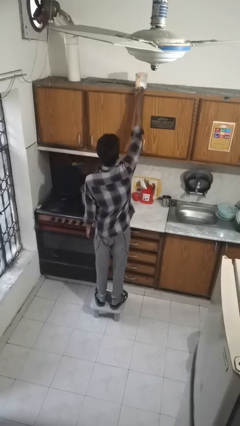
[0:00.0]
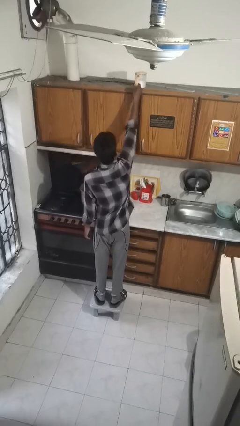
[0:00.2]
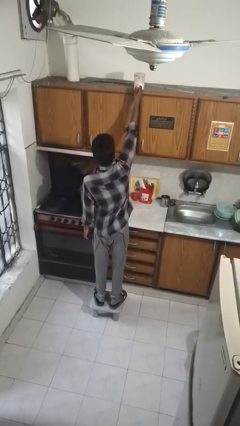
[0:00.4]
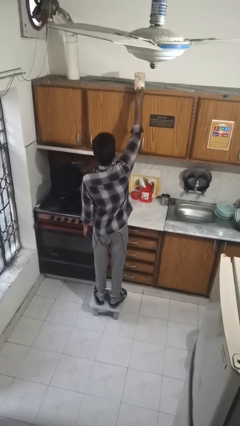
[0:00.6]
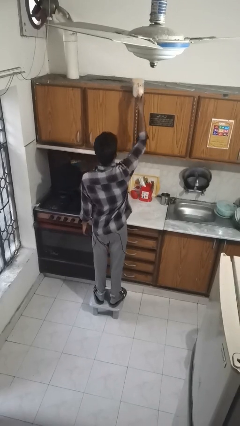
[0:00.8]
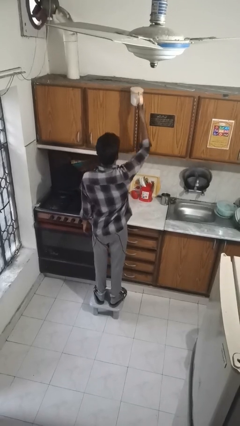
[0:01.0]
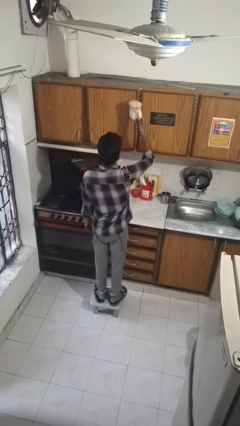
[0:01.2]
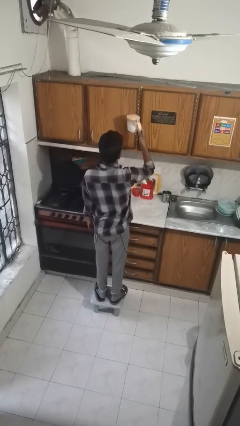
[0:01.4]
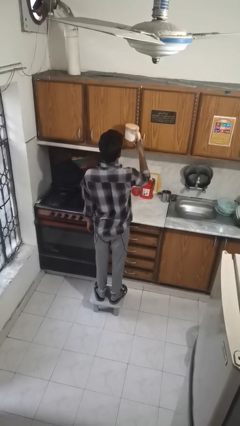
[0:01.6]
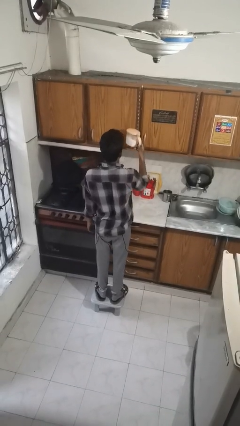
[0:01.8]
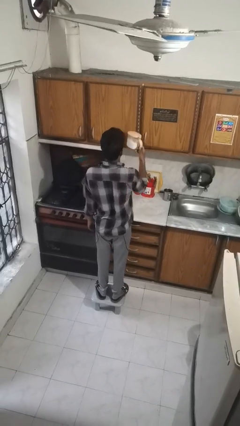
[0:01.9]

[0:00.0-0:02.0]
person picks up object from shelf

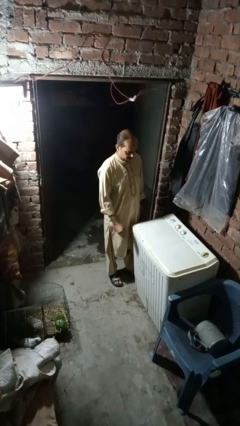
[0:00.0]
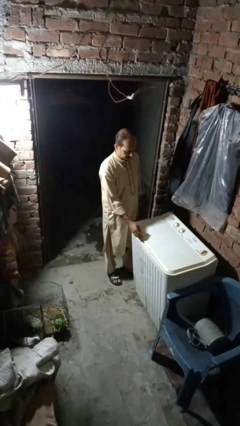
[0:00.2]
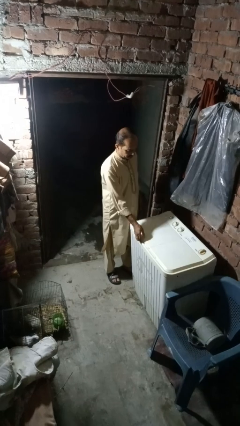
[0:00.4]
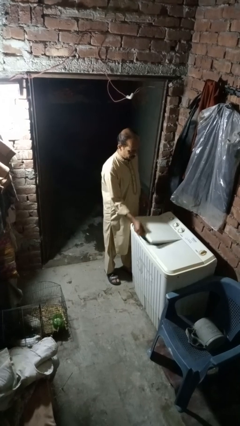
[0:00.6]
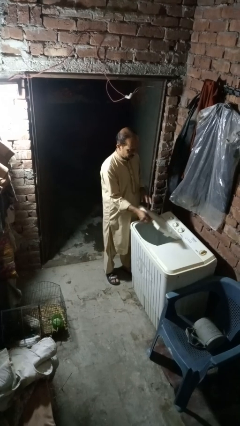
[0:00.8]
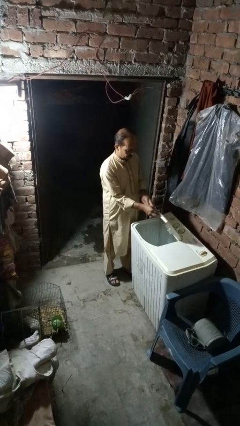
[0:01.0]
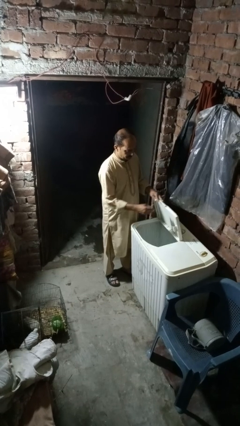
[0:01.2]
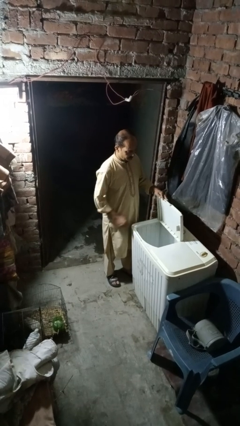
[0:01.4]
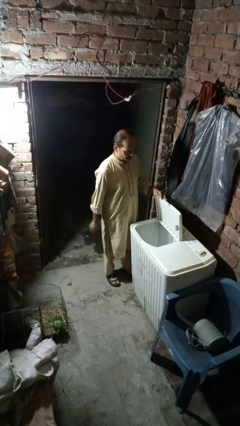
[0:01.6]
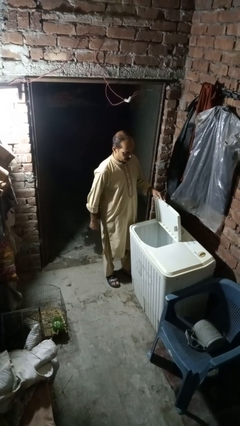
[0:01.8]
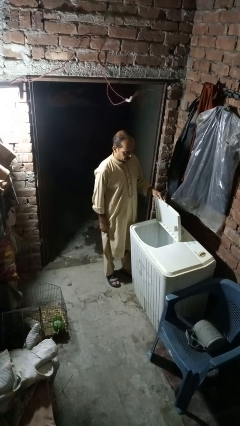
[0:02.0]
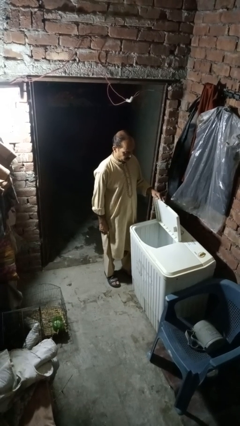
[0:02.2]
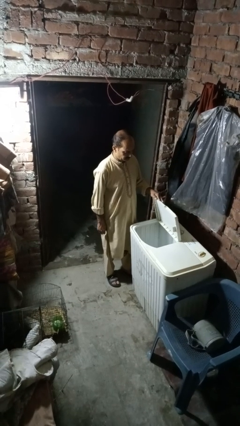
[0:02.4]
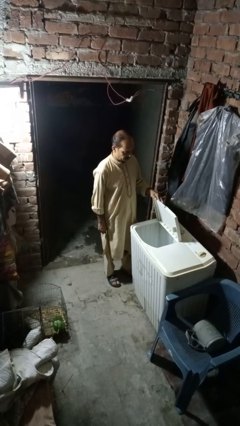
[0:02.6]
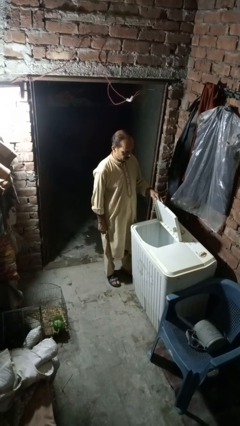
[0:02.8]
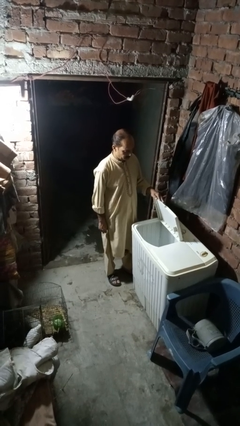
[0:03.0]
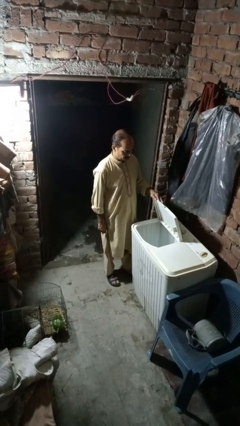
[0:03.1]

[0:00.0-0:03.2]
person opens clothes washer

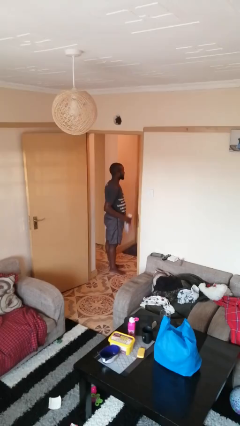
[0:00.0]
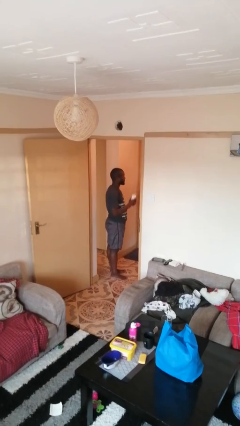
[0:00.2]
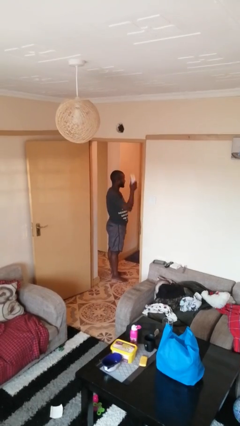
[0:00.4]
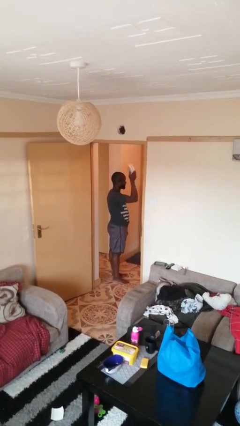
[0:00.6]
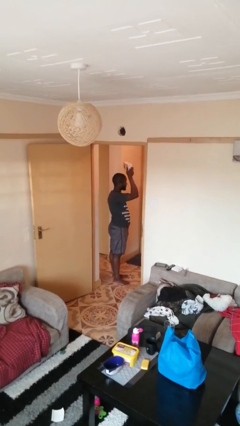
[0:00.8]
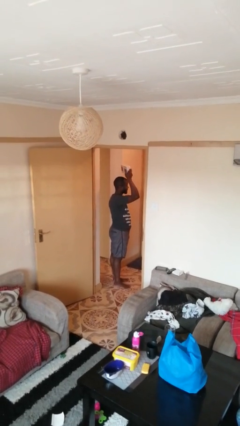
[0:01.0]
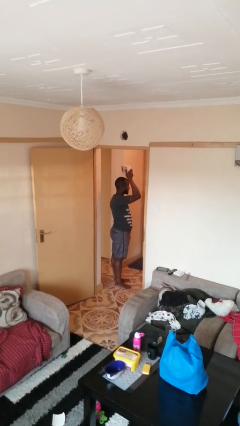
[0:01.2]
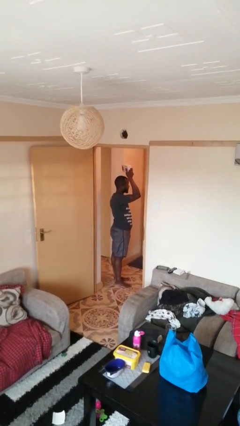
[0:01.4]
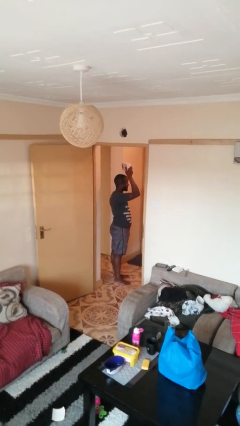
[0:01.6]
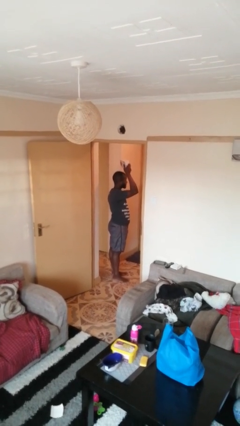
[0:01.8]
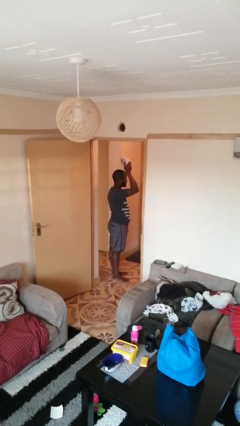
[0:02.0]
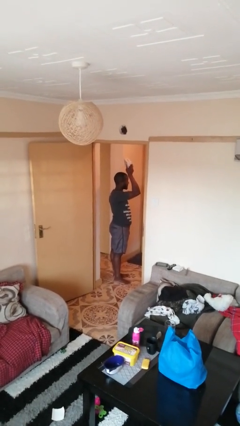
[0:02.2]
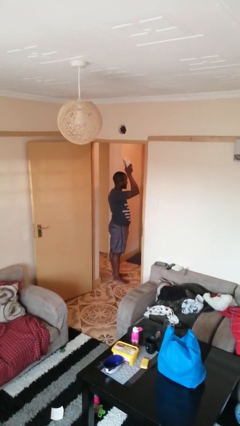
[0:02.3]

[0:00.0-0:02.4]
person holds object above head

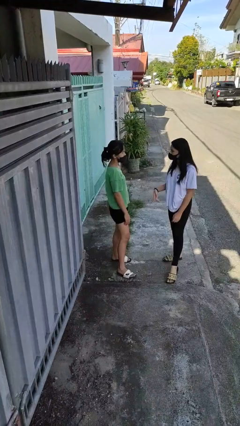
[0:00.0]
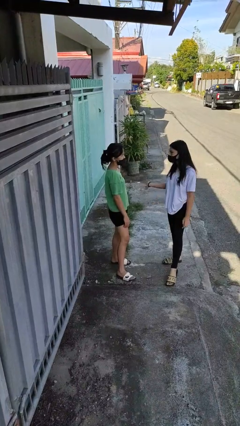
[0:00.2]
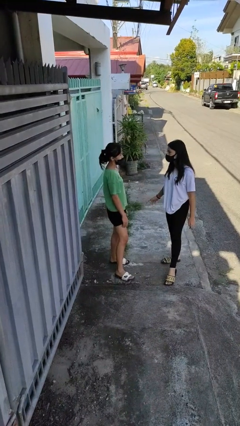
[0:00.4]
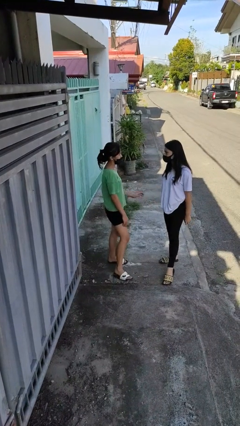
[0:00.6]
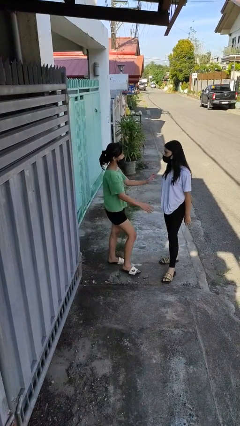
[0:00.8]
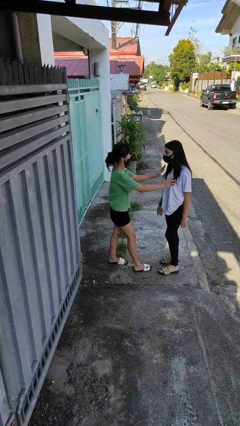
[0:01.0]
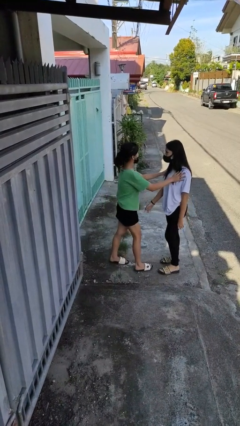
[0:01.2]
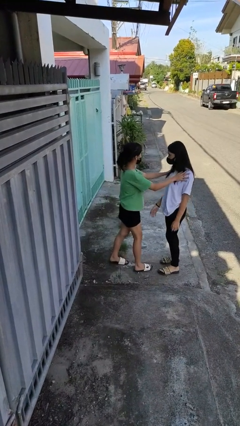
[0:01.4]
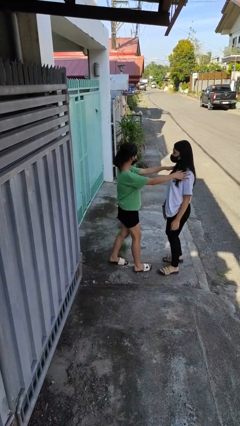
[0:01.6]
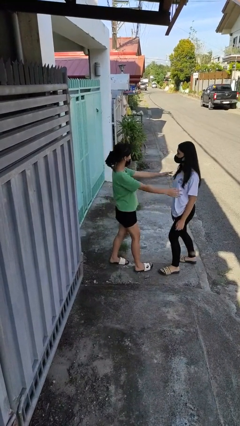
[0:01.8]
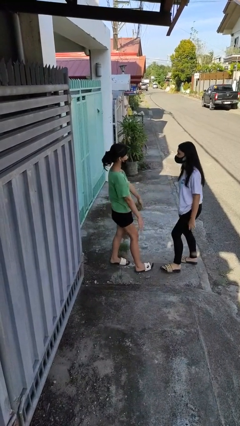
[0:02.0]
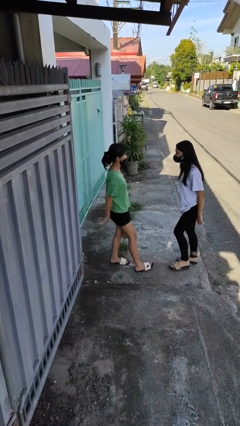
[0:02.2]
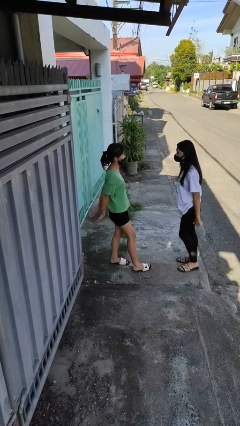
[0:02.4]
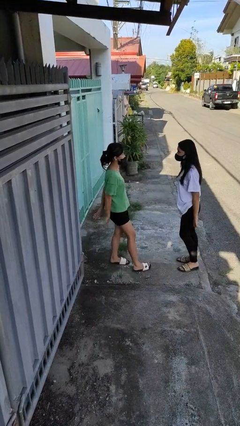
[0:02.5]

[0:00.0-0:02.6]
person shoves person

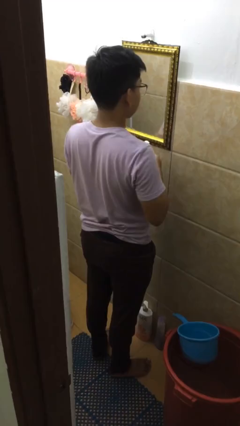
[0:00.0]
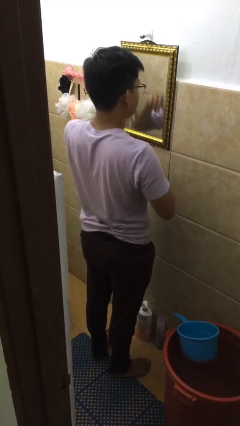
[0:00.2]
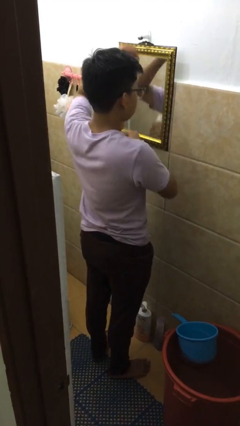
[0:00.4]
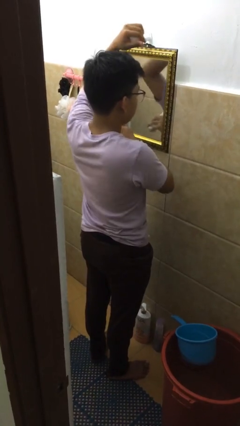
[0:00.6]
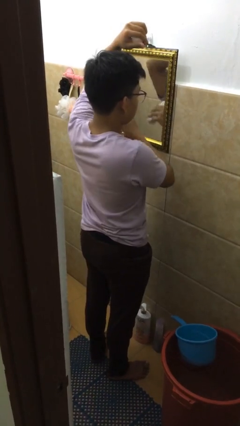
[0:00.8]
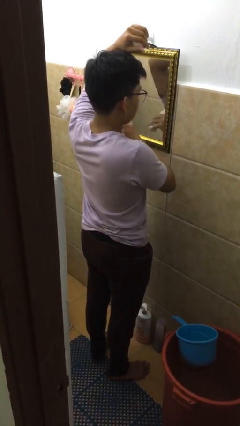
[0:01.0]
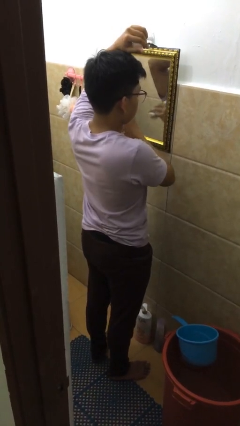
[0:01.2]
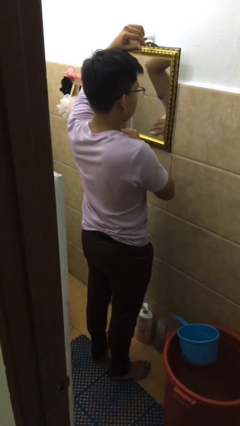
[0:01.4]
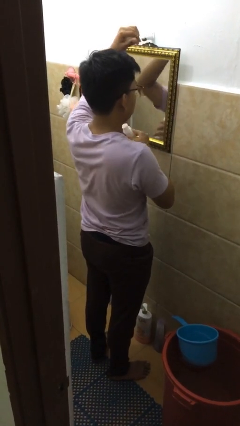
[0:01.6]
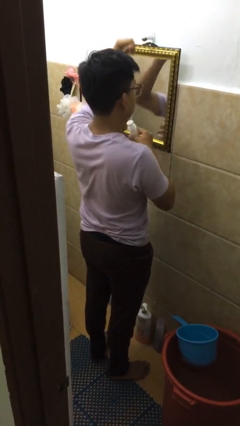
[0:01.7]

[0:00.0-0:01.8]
person applies deodorant

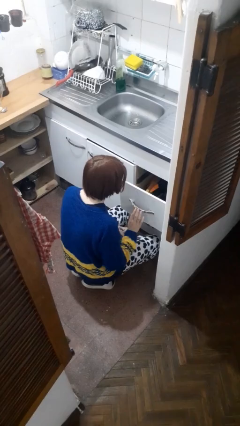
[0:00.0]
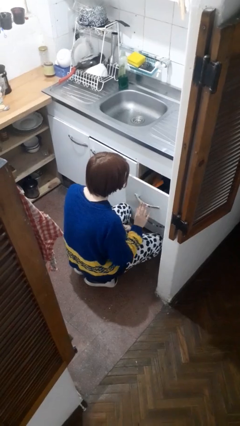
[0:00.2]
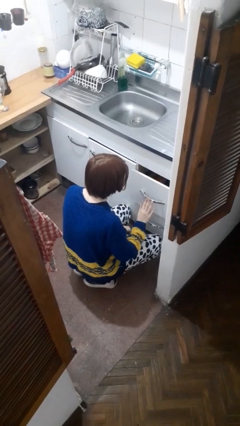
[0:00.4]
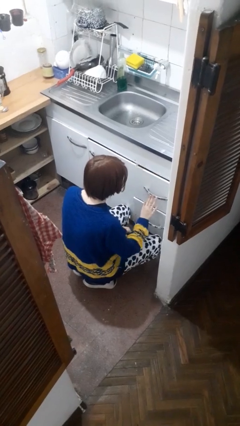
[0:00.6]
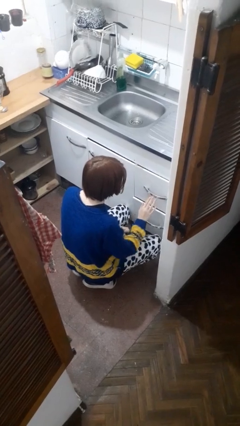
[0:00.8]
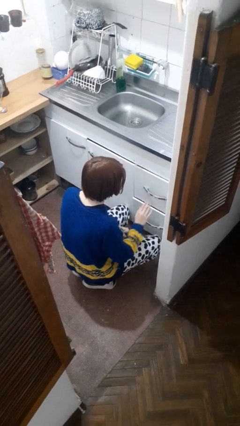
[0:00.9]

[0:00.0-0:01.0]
person closes kitchen drawer

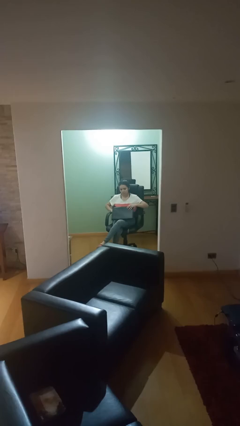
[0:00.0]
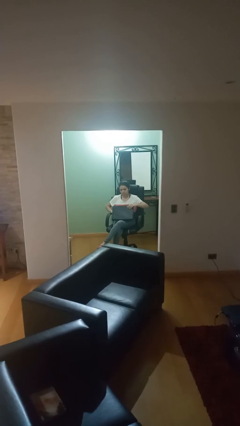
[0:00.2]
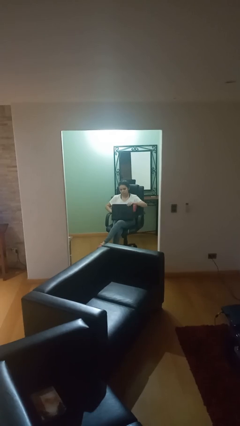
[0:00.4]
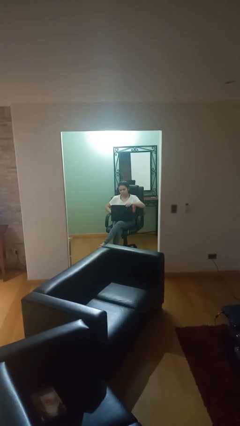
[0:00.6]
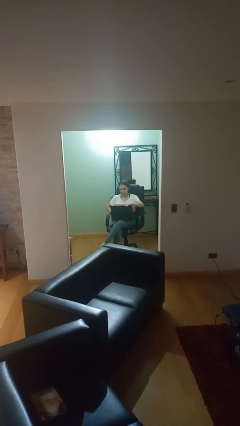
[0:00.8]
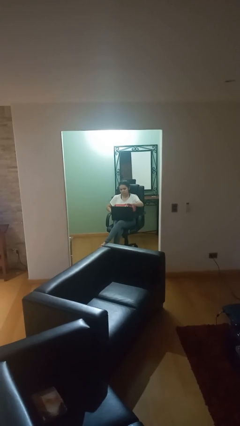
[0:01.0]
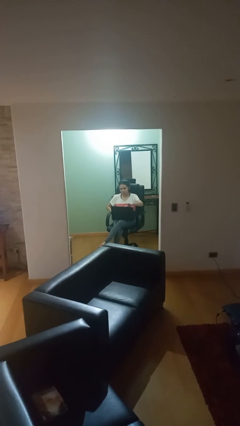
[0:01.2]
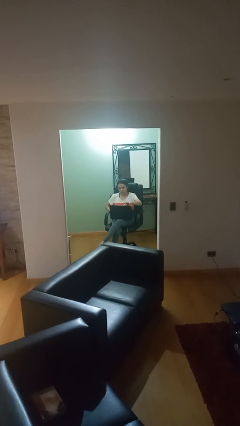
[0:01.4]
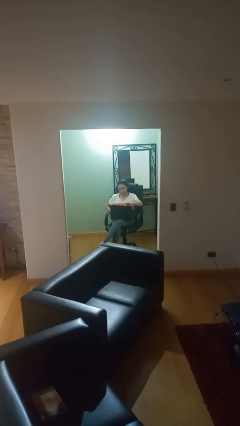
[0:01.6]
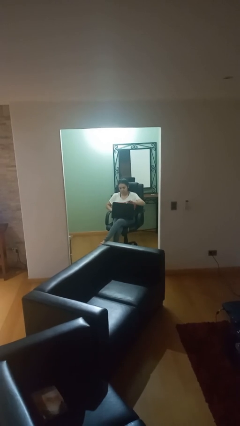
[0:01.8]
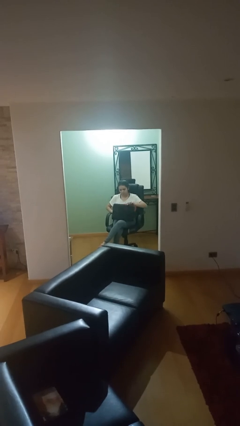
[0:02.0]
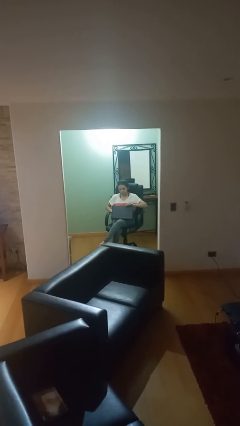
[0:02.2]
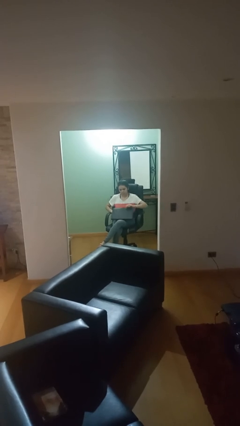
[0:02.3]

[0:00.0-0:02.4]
person interacts with laptop

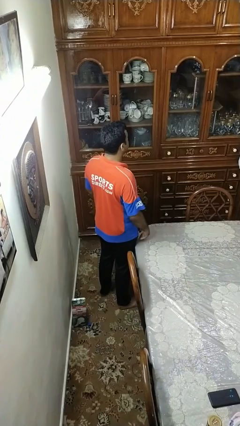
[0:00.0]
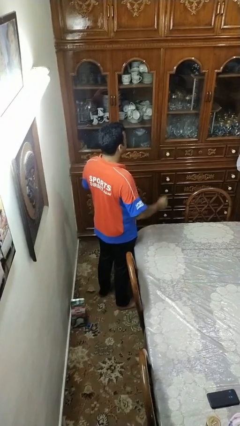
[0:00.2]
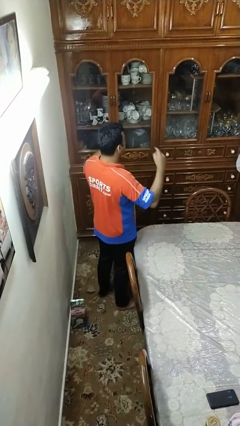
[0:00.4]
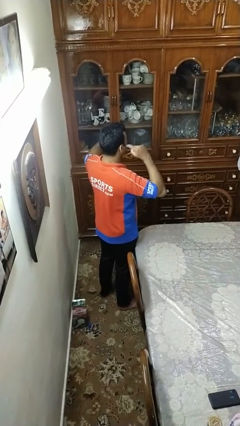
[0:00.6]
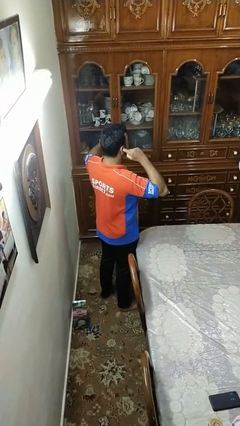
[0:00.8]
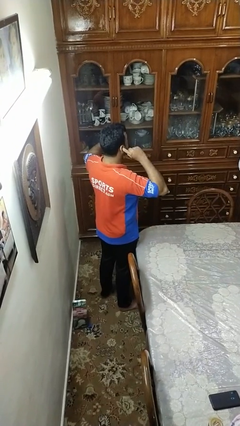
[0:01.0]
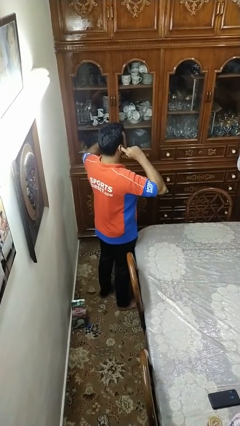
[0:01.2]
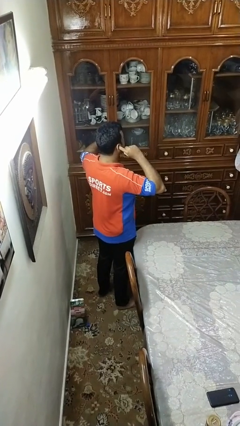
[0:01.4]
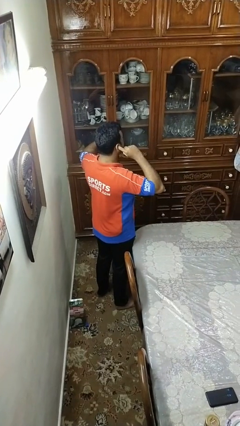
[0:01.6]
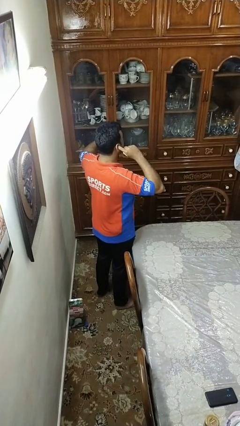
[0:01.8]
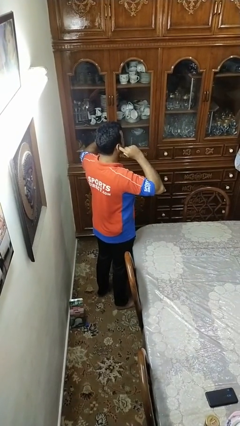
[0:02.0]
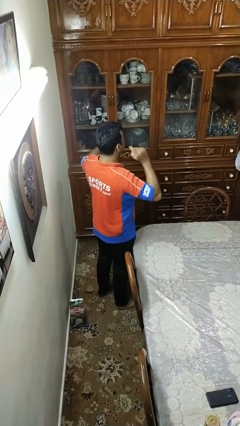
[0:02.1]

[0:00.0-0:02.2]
person puts fingers in ear
